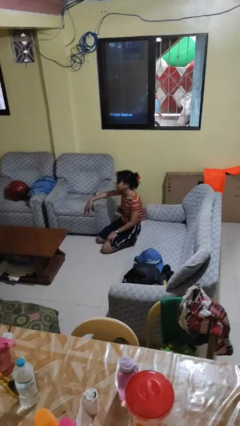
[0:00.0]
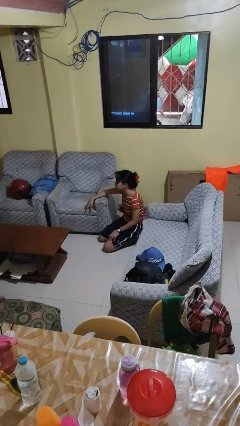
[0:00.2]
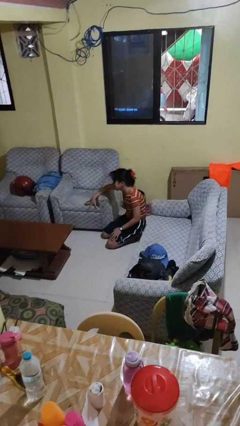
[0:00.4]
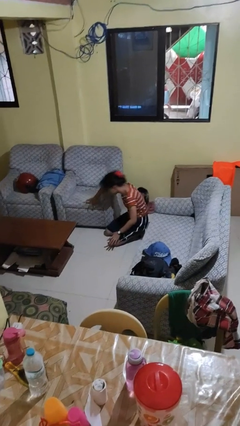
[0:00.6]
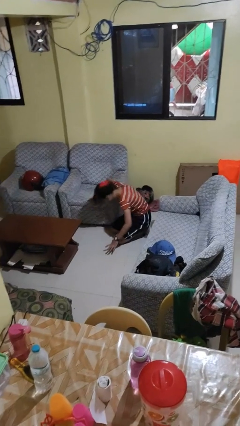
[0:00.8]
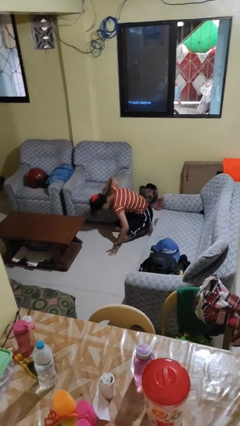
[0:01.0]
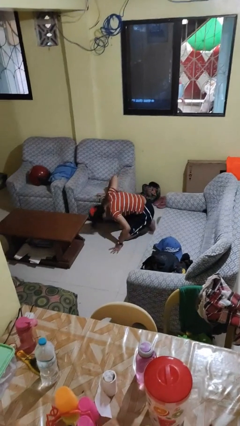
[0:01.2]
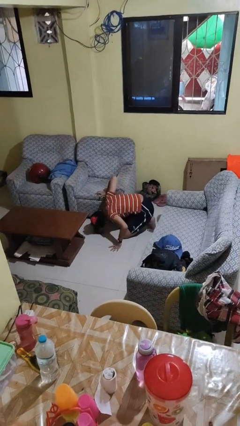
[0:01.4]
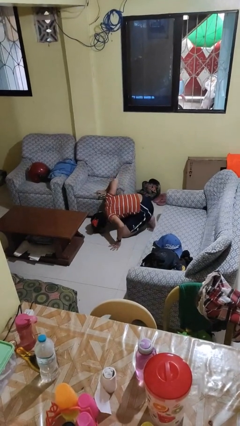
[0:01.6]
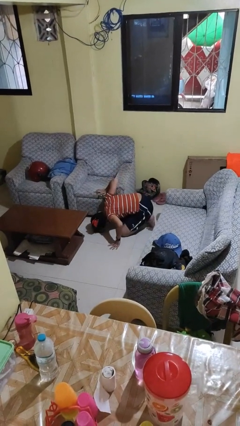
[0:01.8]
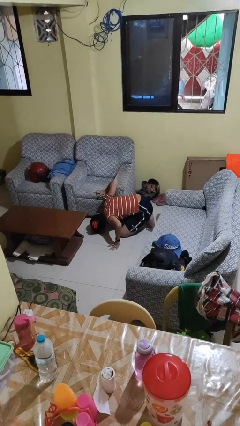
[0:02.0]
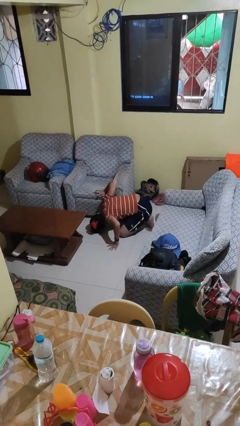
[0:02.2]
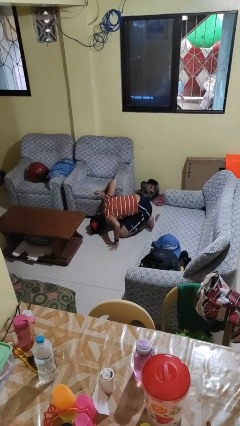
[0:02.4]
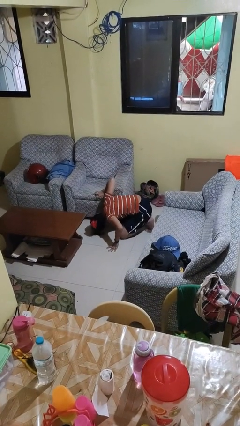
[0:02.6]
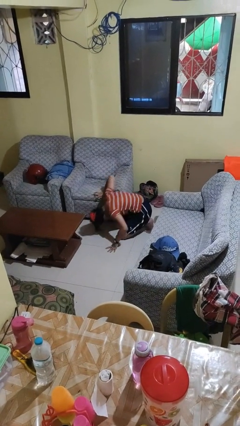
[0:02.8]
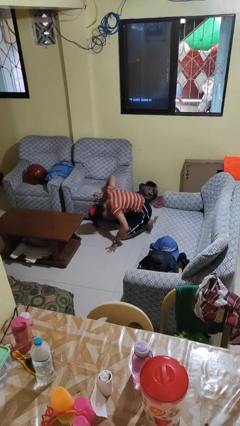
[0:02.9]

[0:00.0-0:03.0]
person searches under couch

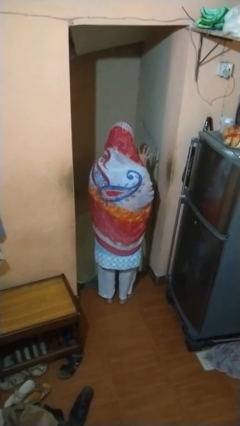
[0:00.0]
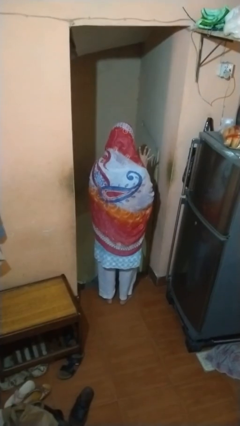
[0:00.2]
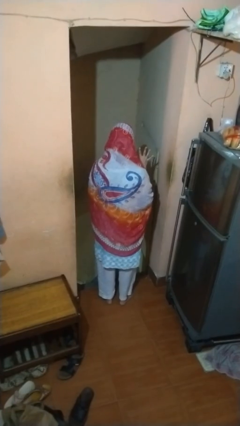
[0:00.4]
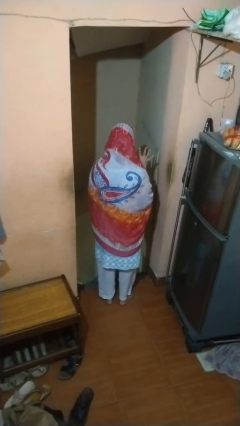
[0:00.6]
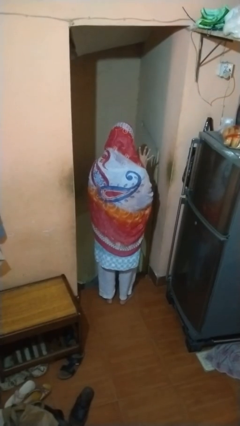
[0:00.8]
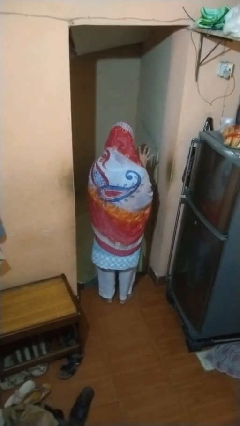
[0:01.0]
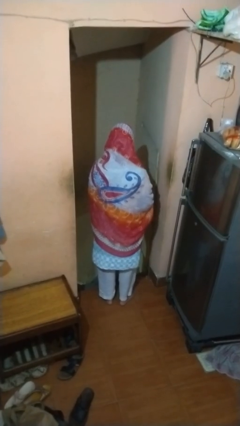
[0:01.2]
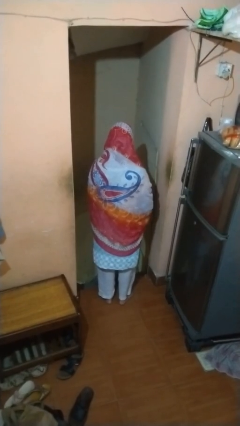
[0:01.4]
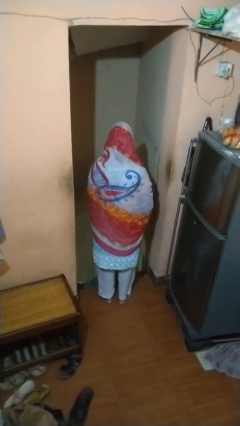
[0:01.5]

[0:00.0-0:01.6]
person gestures number four

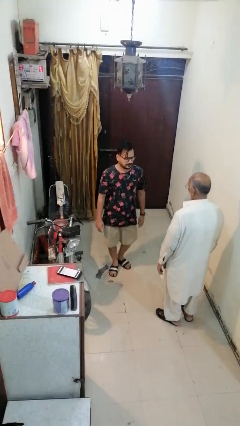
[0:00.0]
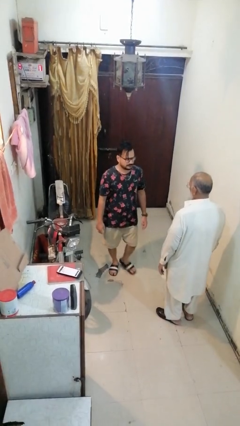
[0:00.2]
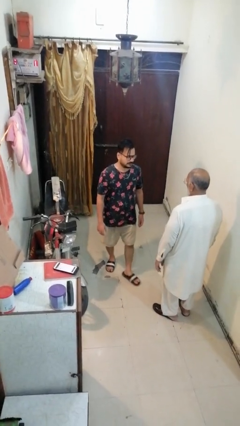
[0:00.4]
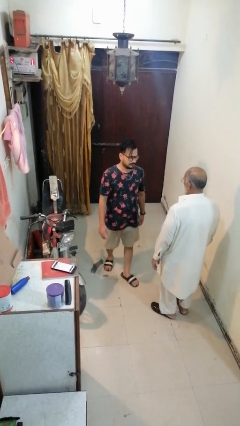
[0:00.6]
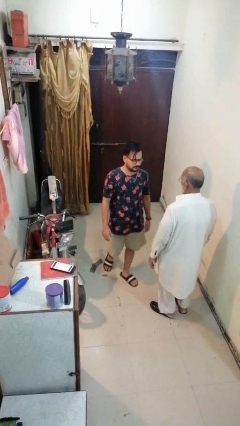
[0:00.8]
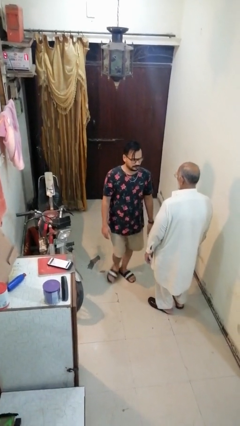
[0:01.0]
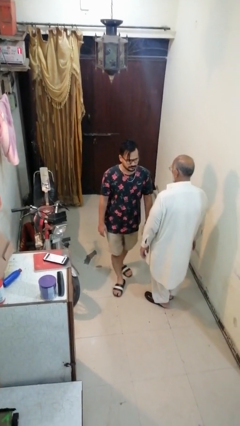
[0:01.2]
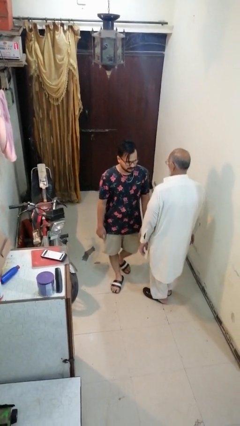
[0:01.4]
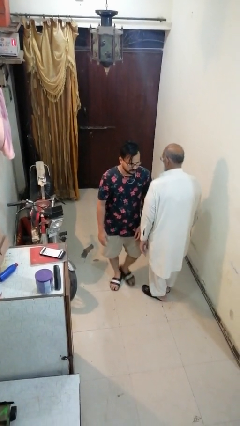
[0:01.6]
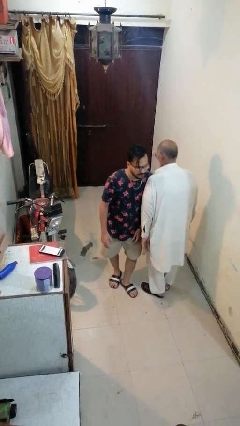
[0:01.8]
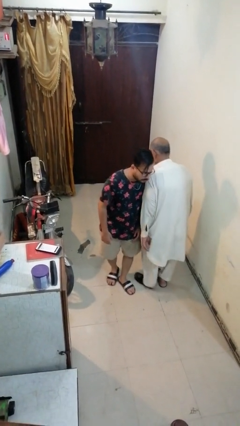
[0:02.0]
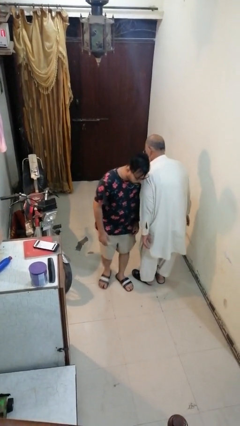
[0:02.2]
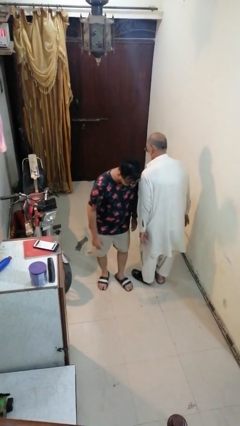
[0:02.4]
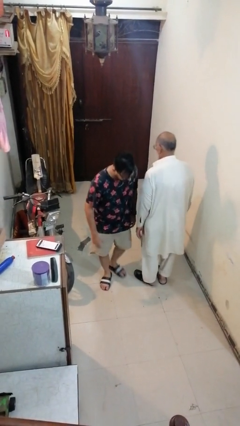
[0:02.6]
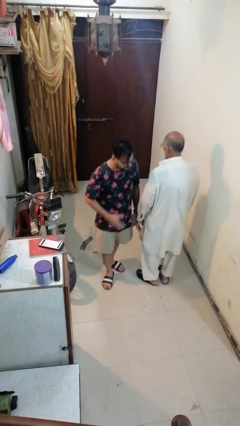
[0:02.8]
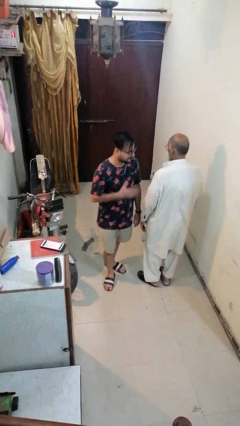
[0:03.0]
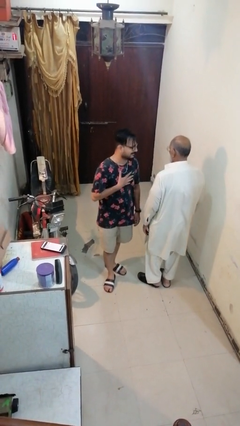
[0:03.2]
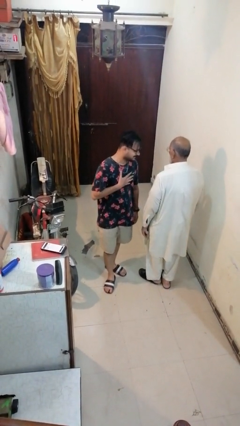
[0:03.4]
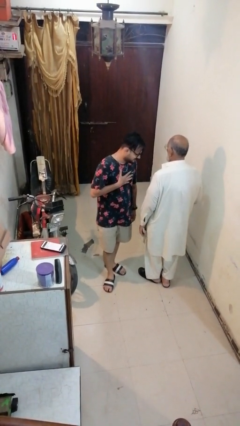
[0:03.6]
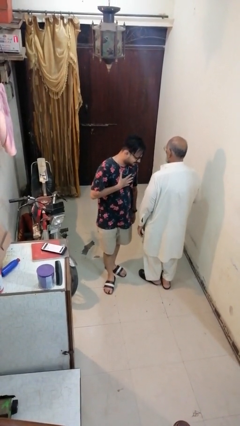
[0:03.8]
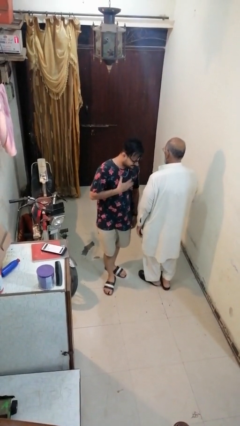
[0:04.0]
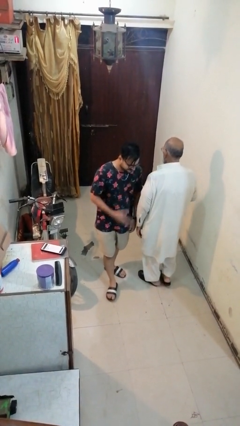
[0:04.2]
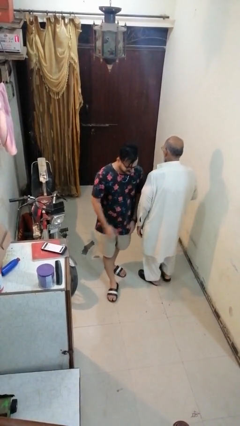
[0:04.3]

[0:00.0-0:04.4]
person bumps into person

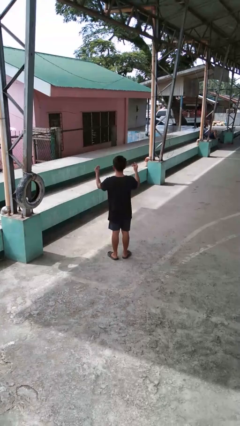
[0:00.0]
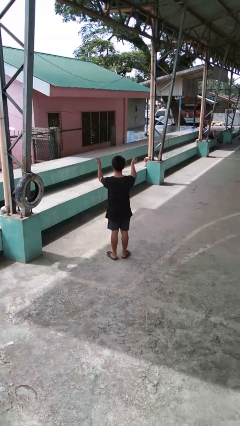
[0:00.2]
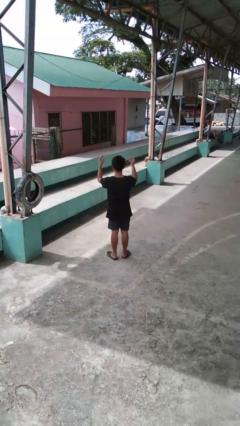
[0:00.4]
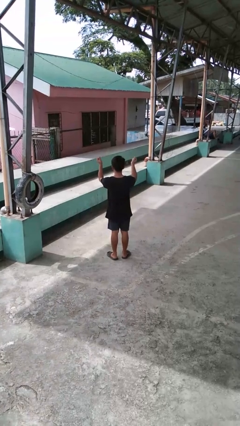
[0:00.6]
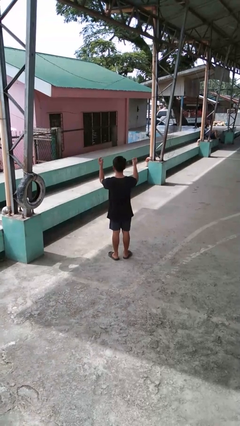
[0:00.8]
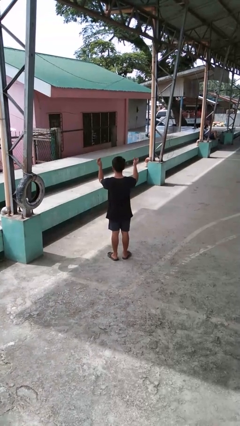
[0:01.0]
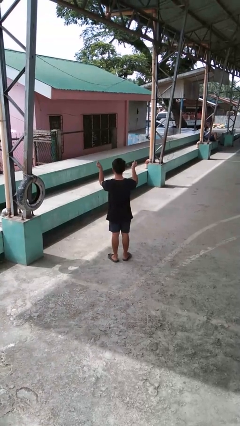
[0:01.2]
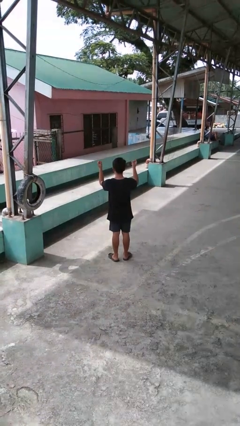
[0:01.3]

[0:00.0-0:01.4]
person snaps fingers

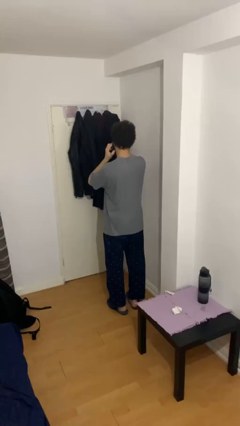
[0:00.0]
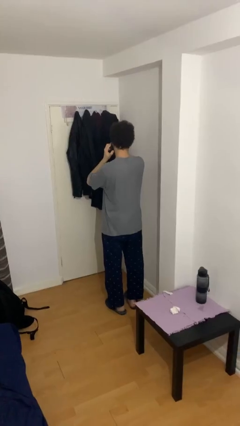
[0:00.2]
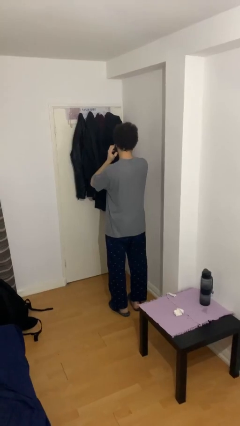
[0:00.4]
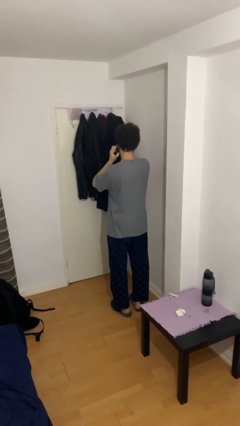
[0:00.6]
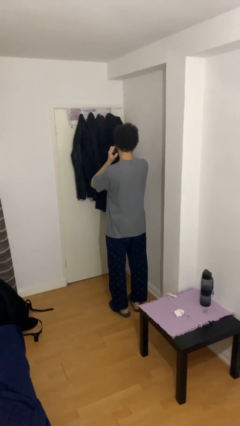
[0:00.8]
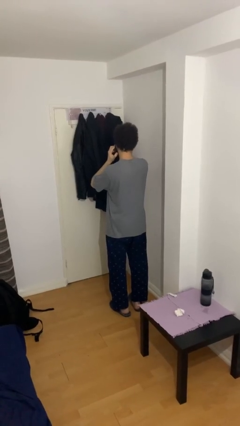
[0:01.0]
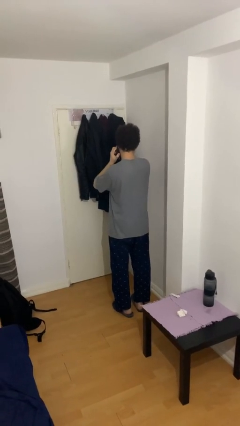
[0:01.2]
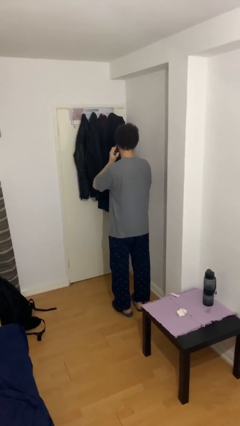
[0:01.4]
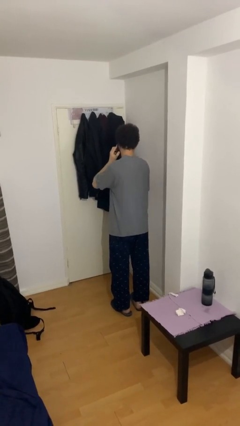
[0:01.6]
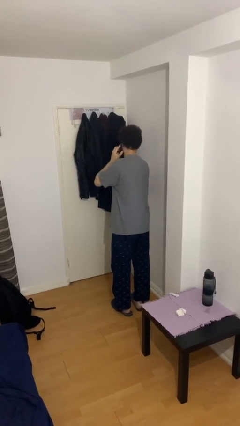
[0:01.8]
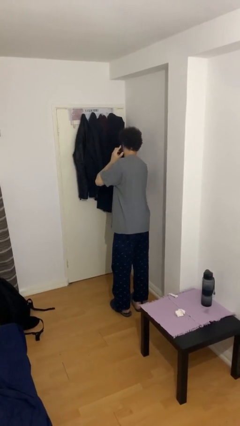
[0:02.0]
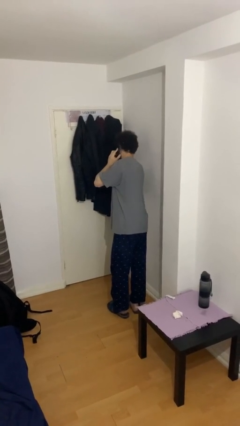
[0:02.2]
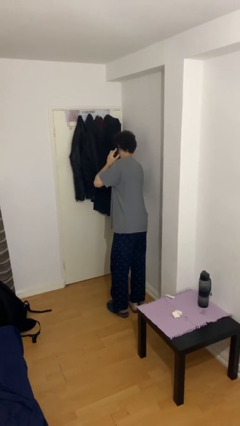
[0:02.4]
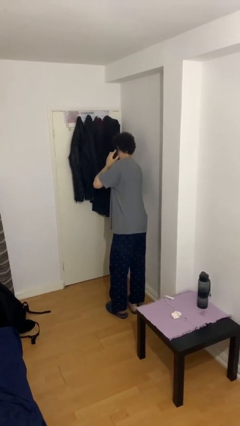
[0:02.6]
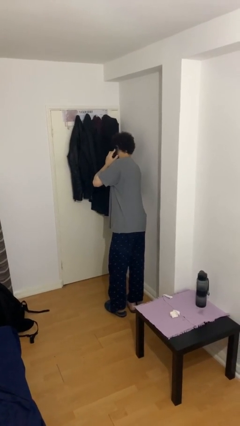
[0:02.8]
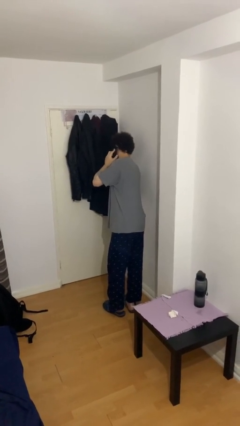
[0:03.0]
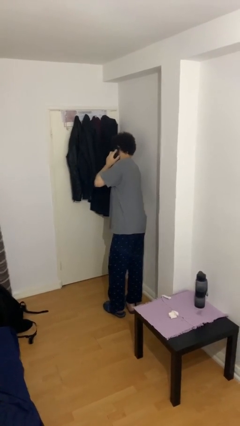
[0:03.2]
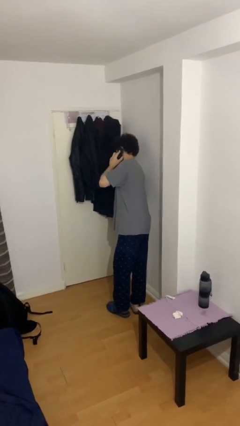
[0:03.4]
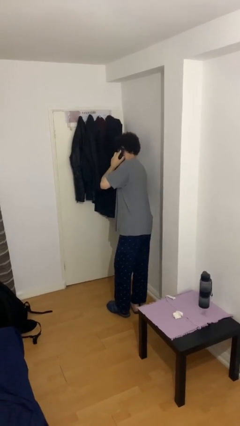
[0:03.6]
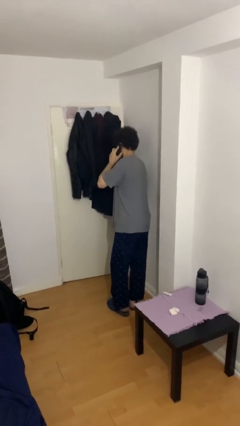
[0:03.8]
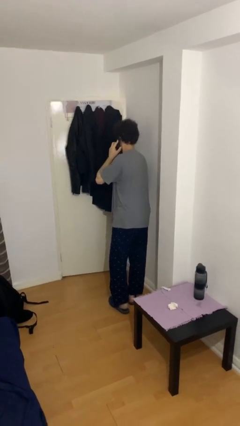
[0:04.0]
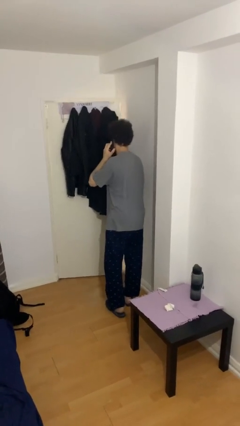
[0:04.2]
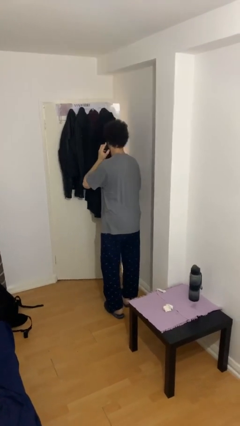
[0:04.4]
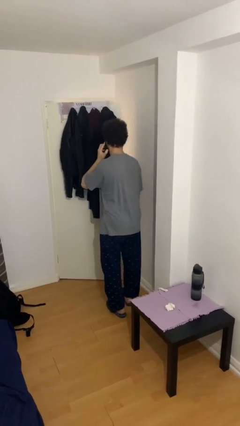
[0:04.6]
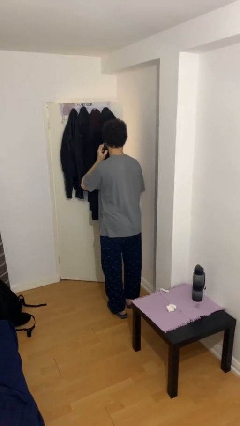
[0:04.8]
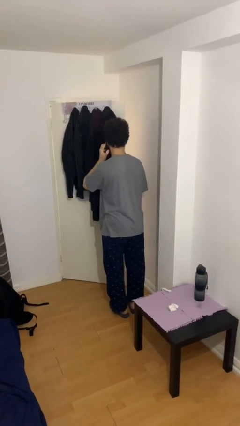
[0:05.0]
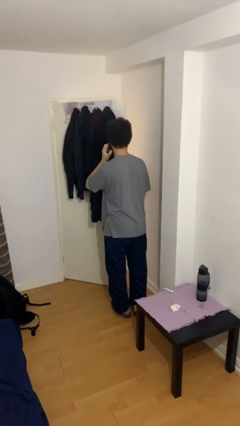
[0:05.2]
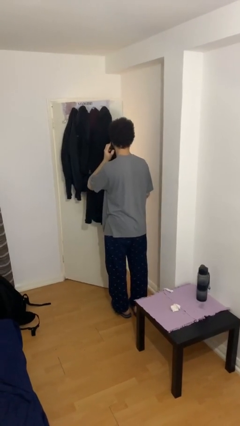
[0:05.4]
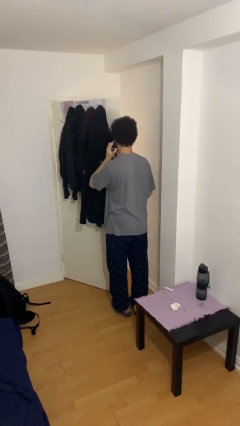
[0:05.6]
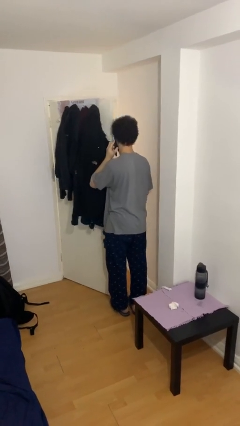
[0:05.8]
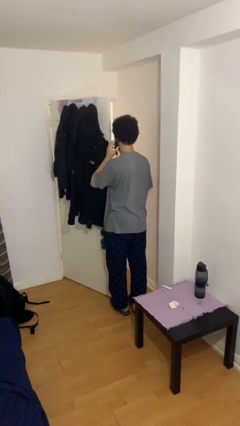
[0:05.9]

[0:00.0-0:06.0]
person opens facility door

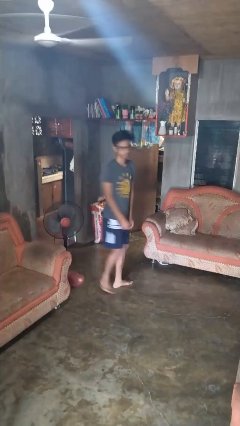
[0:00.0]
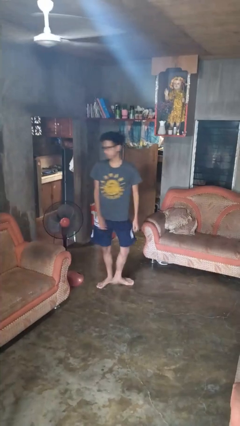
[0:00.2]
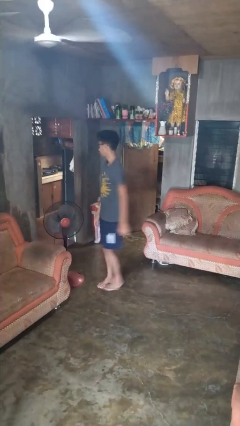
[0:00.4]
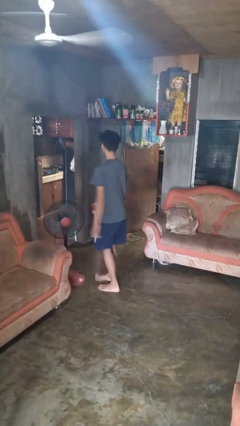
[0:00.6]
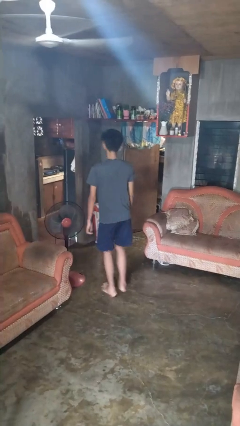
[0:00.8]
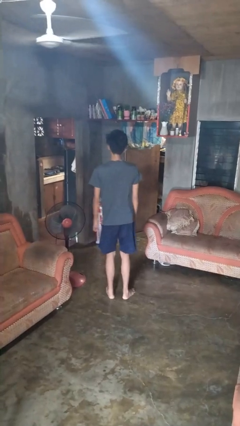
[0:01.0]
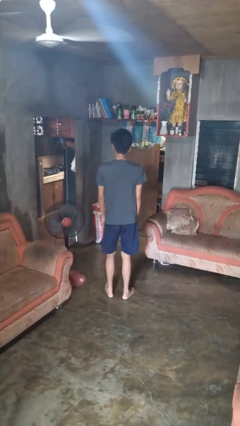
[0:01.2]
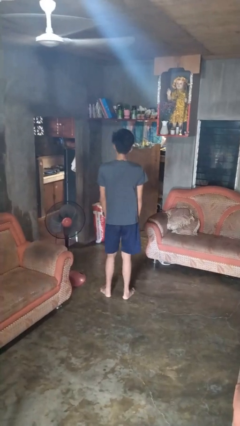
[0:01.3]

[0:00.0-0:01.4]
person twirls
